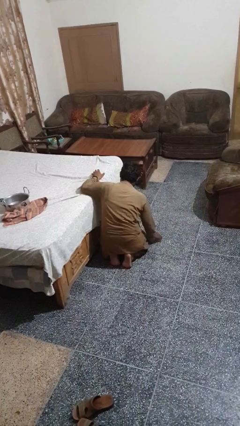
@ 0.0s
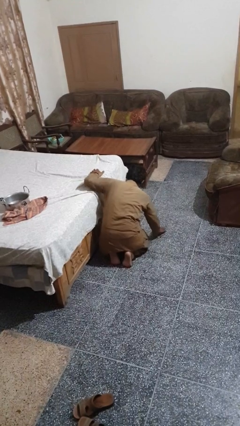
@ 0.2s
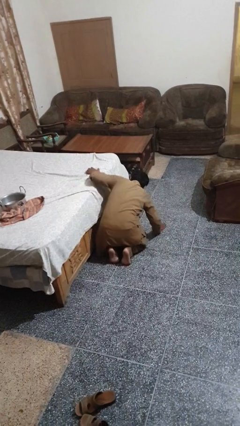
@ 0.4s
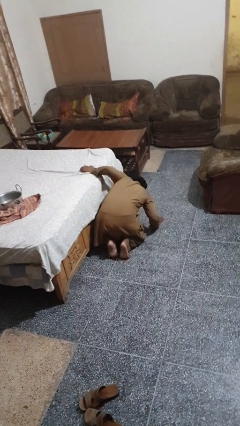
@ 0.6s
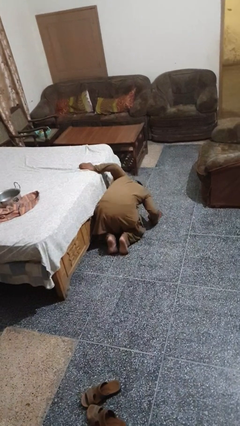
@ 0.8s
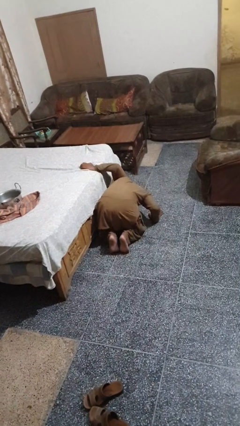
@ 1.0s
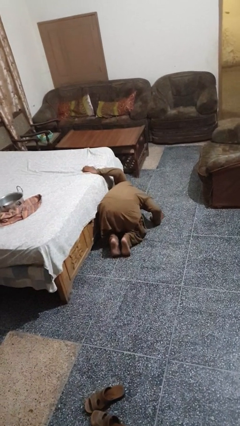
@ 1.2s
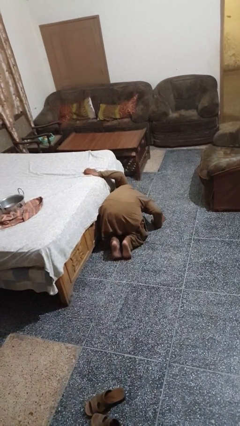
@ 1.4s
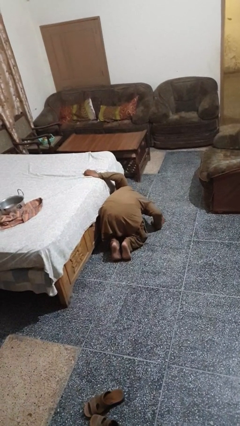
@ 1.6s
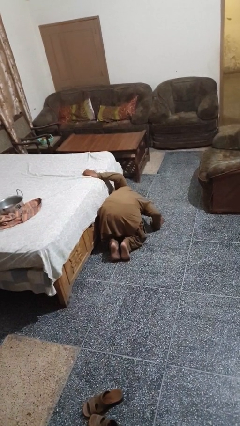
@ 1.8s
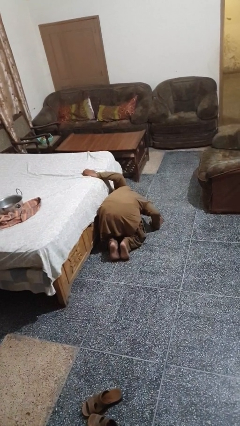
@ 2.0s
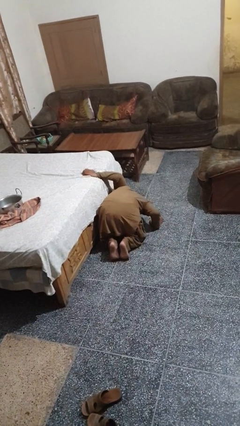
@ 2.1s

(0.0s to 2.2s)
person searches under bed

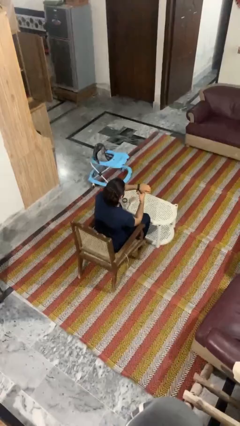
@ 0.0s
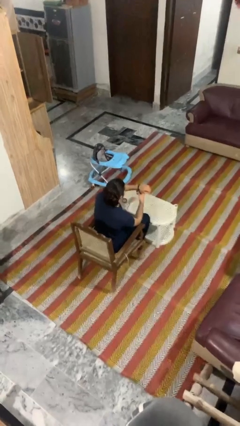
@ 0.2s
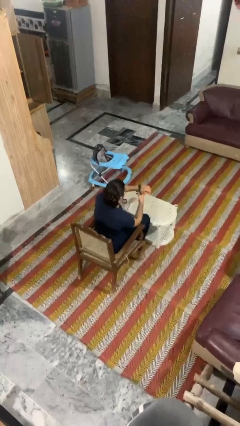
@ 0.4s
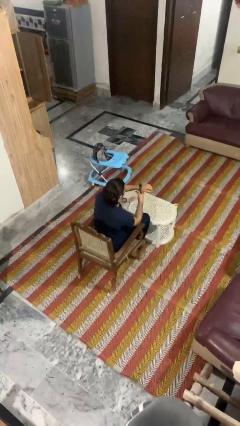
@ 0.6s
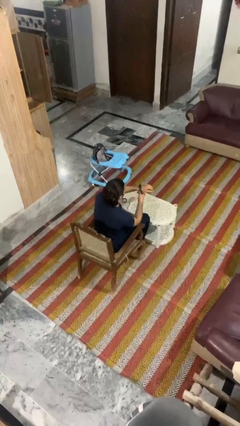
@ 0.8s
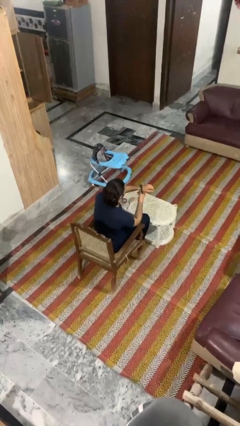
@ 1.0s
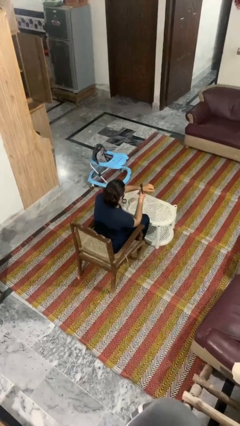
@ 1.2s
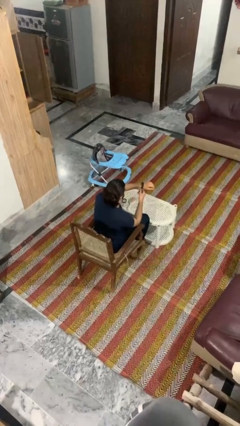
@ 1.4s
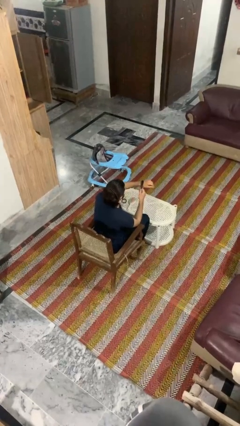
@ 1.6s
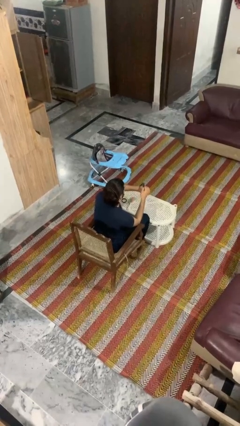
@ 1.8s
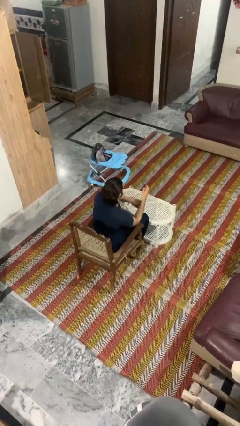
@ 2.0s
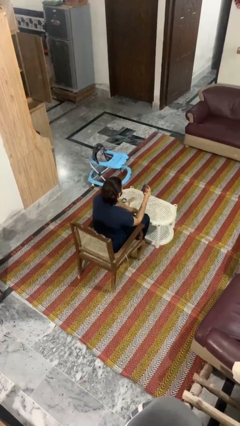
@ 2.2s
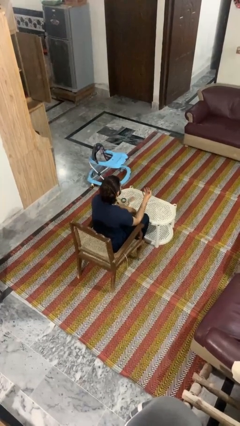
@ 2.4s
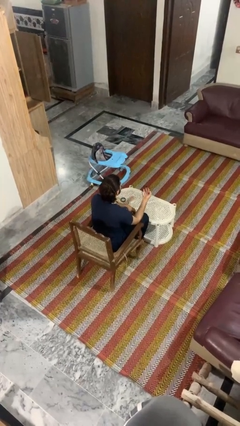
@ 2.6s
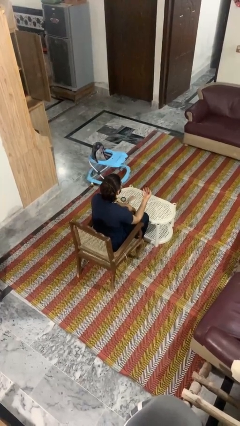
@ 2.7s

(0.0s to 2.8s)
person takes off wristwatch

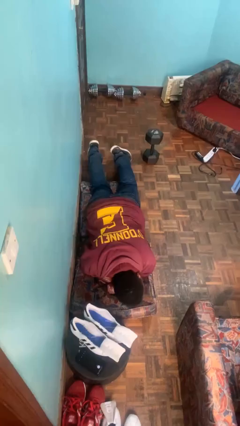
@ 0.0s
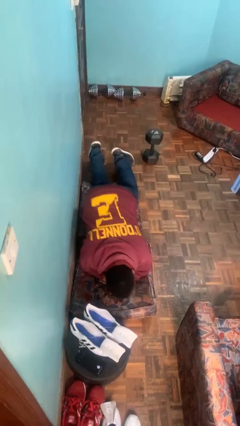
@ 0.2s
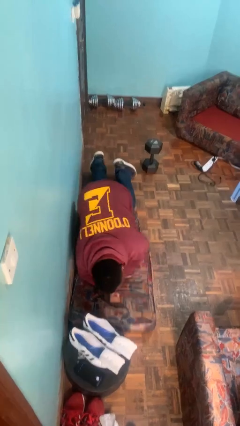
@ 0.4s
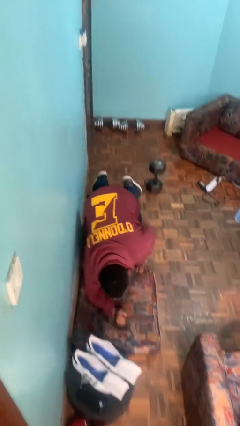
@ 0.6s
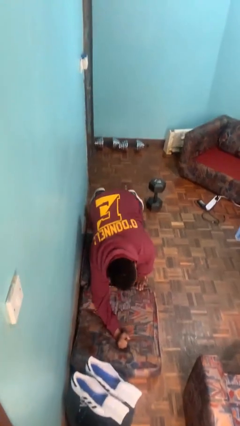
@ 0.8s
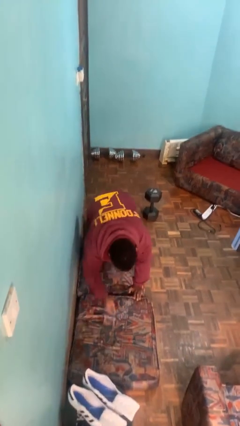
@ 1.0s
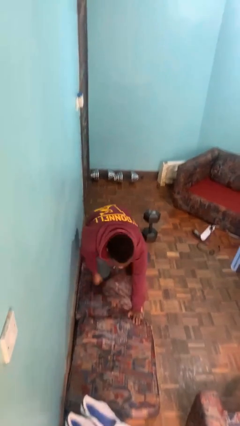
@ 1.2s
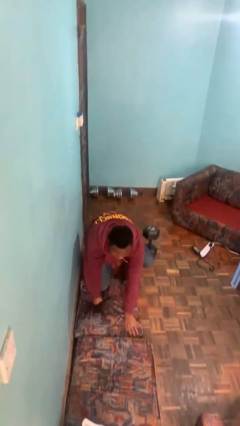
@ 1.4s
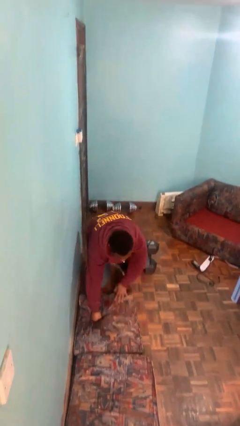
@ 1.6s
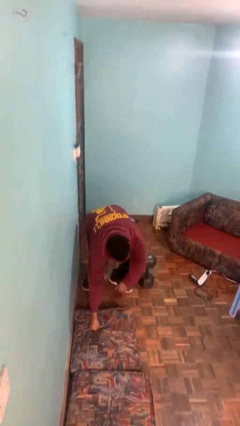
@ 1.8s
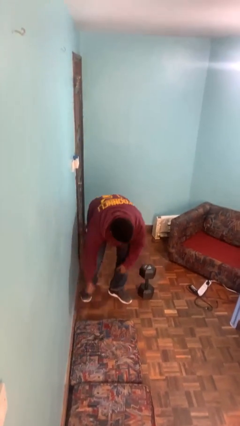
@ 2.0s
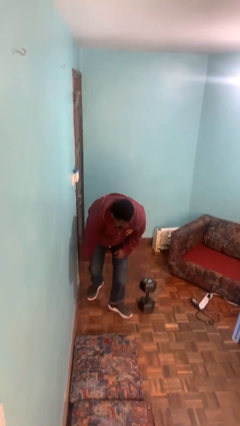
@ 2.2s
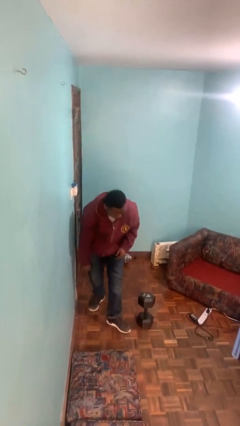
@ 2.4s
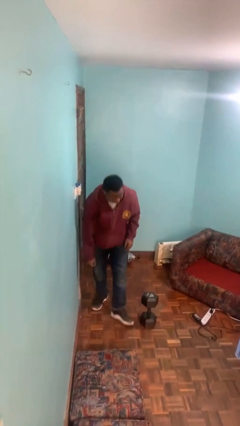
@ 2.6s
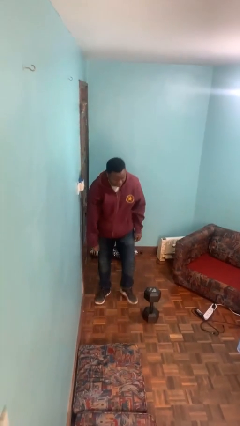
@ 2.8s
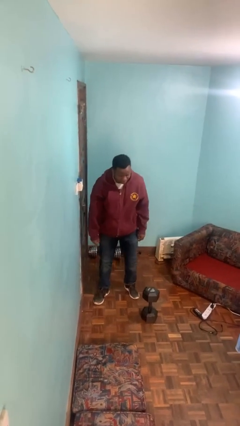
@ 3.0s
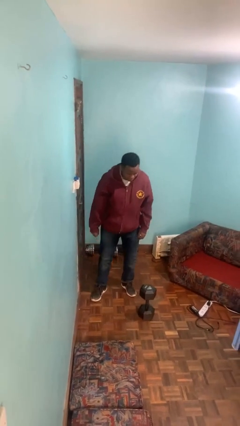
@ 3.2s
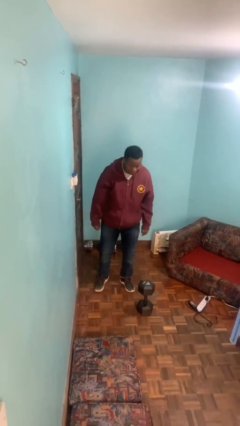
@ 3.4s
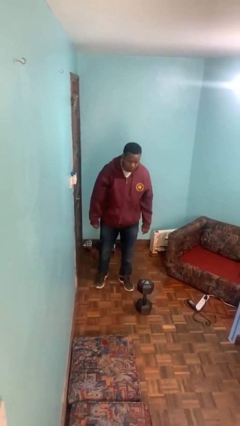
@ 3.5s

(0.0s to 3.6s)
person stands up from floor

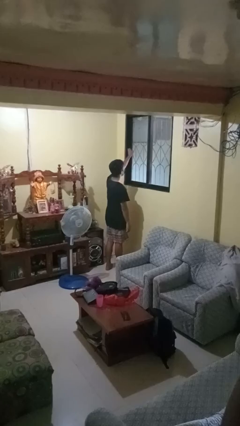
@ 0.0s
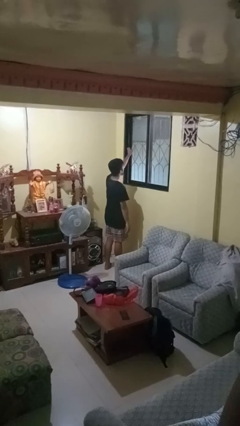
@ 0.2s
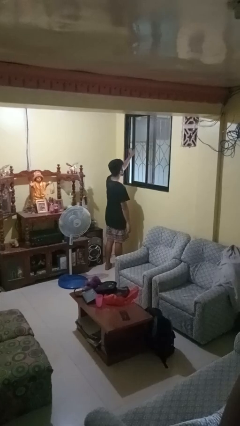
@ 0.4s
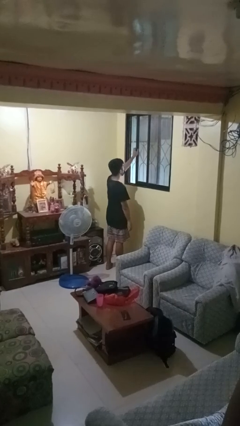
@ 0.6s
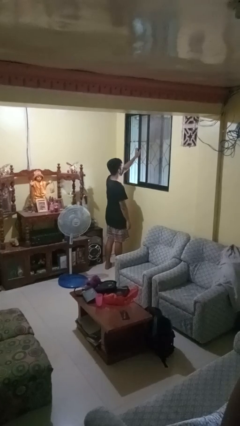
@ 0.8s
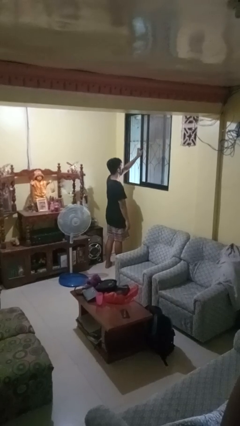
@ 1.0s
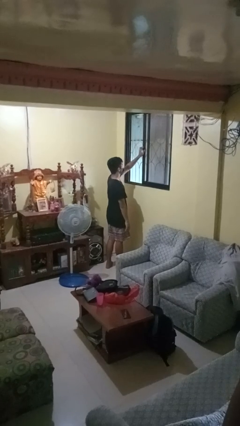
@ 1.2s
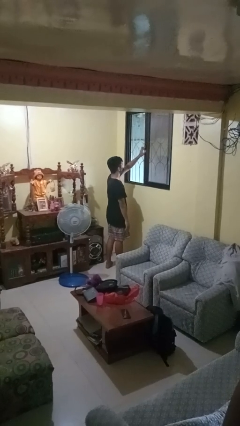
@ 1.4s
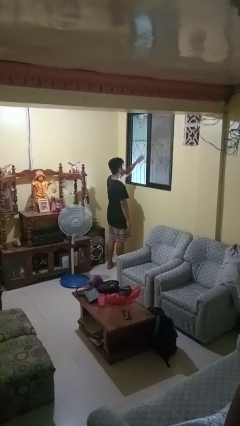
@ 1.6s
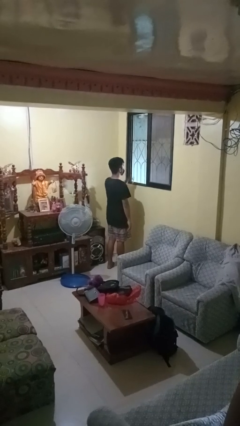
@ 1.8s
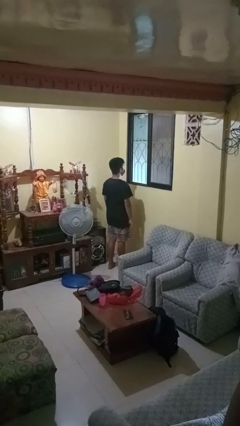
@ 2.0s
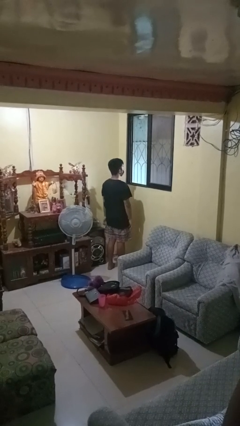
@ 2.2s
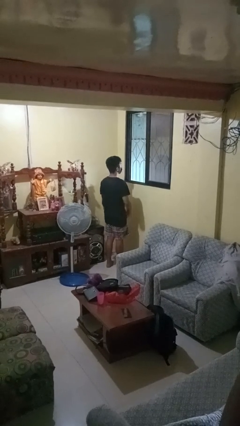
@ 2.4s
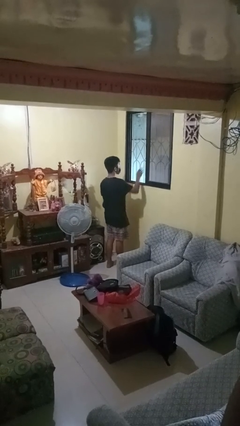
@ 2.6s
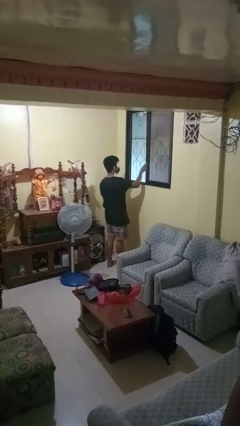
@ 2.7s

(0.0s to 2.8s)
person opens home window

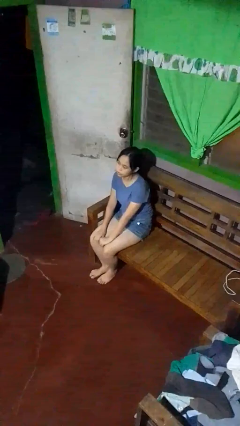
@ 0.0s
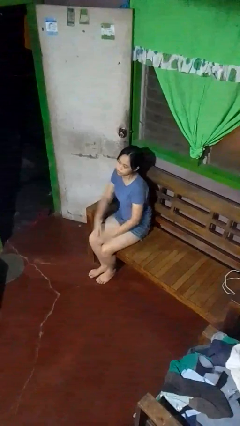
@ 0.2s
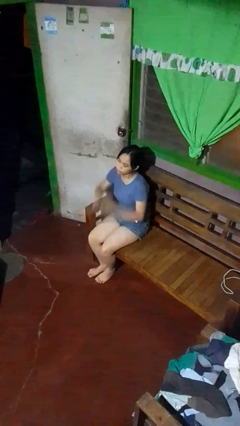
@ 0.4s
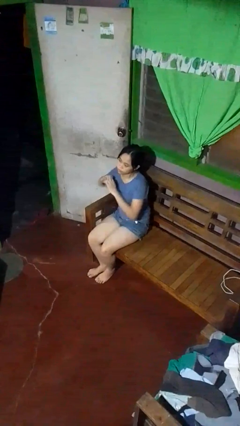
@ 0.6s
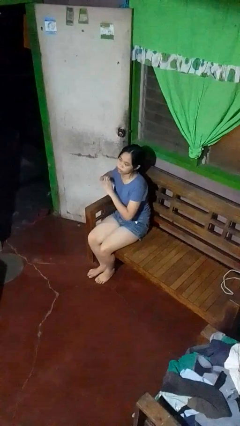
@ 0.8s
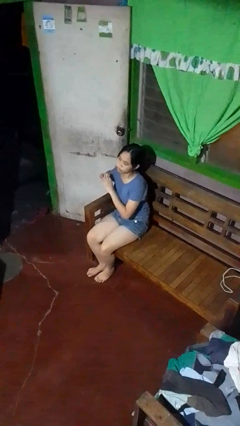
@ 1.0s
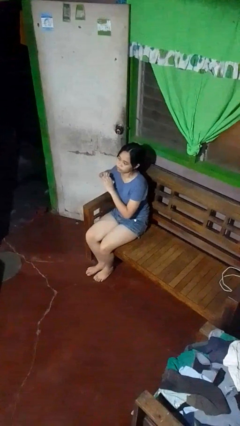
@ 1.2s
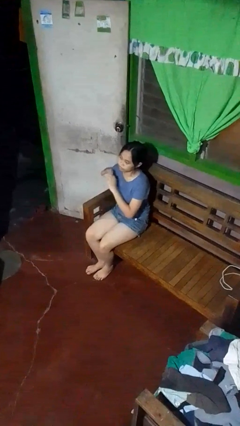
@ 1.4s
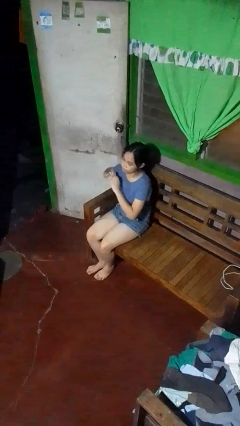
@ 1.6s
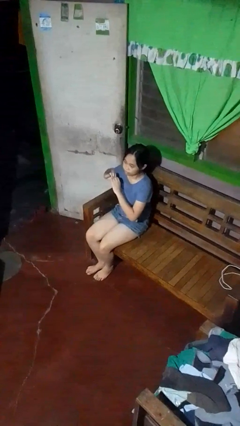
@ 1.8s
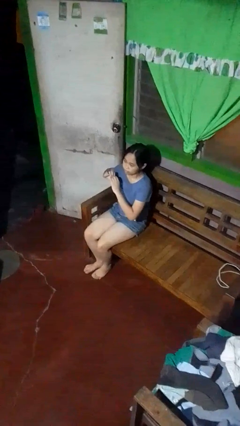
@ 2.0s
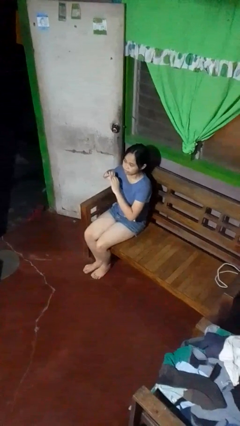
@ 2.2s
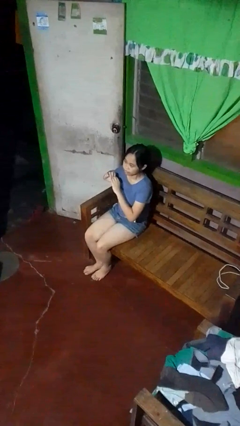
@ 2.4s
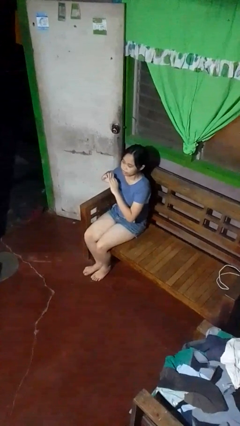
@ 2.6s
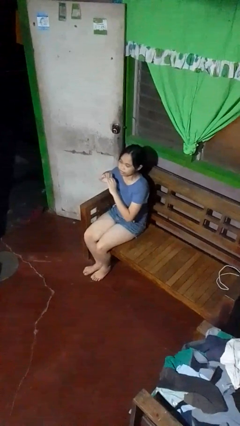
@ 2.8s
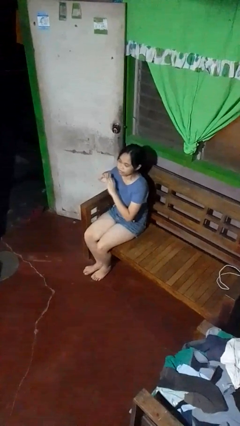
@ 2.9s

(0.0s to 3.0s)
person gestures heart

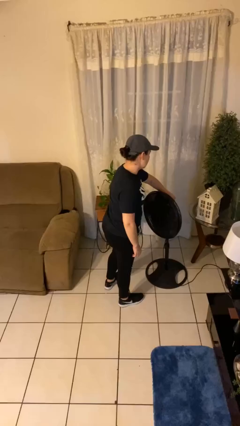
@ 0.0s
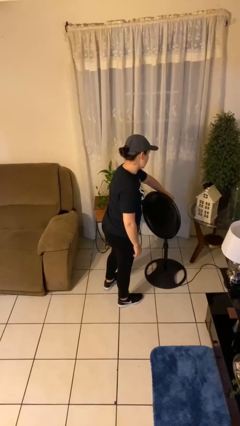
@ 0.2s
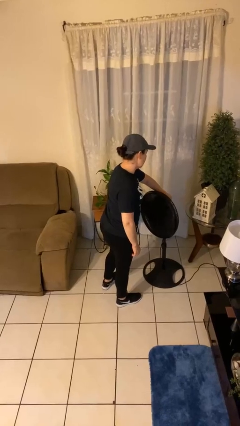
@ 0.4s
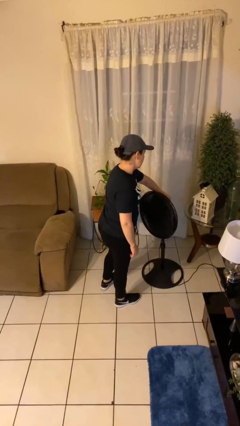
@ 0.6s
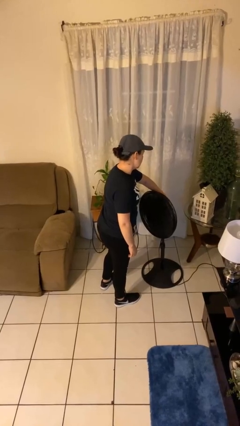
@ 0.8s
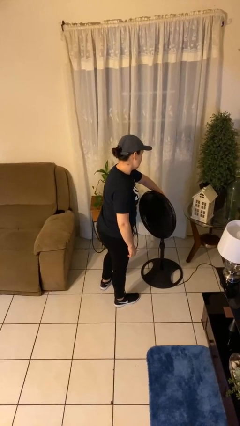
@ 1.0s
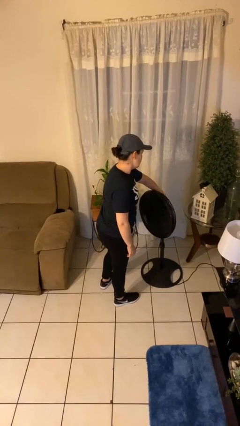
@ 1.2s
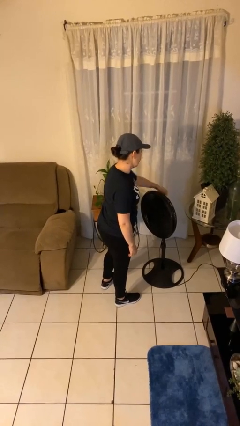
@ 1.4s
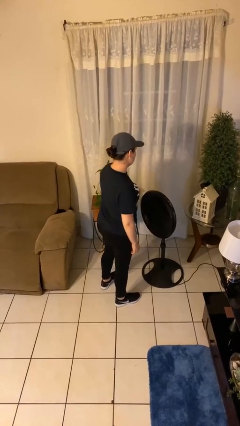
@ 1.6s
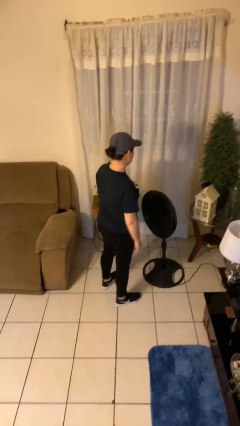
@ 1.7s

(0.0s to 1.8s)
person turns on fan

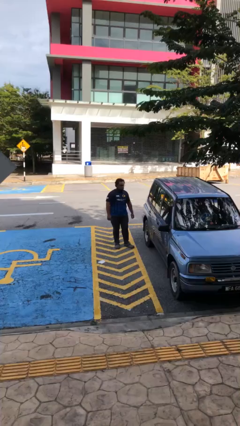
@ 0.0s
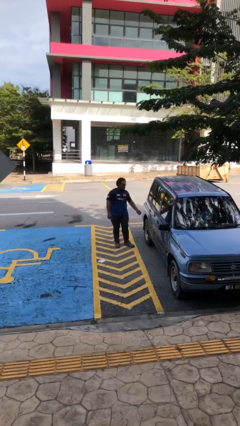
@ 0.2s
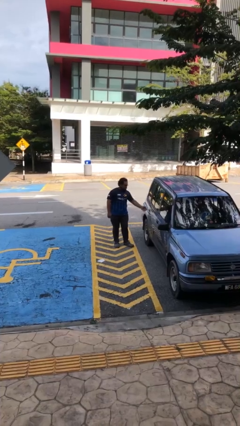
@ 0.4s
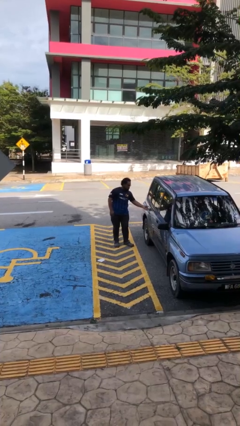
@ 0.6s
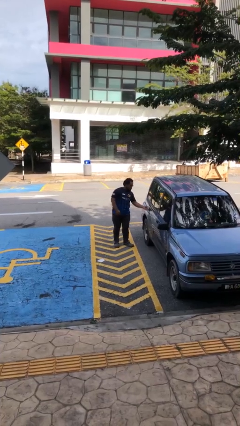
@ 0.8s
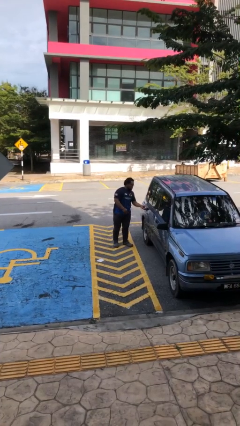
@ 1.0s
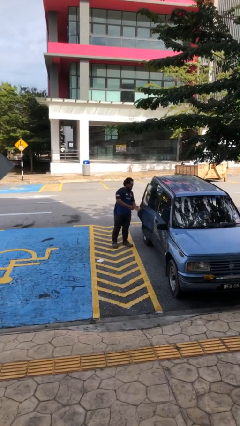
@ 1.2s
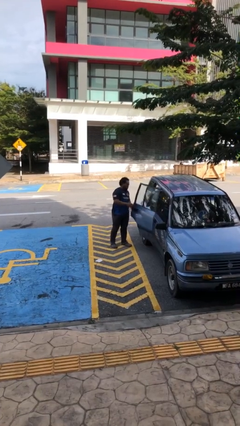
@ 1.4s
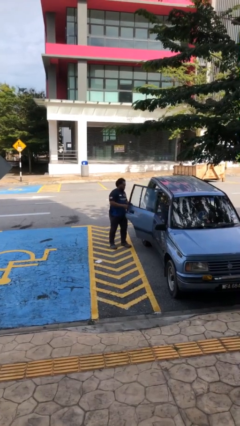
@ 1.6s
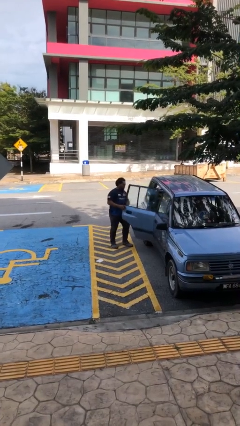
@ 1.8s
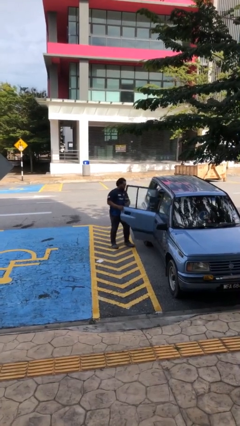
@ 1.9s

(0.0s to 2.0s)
person opens car door
